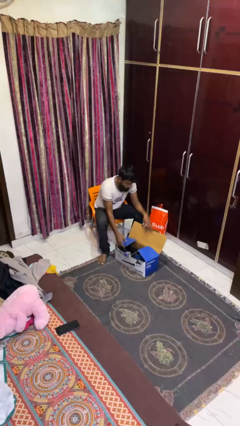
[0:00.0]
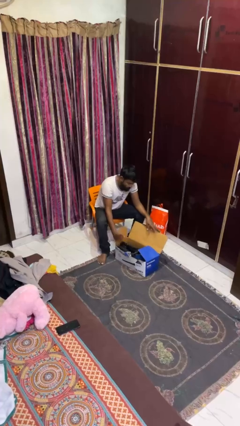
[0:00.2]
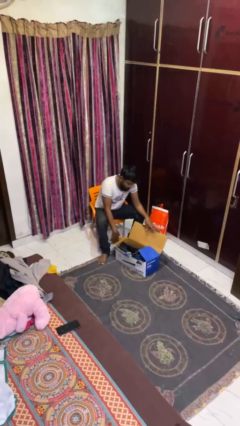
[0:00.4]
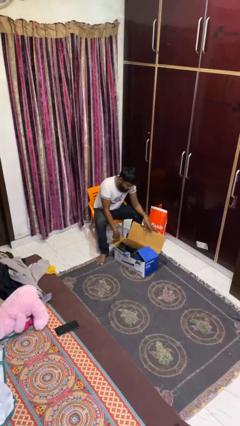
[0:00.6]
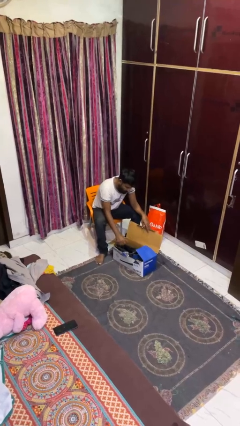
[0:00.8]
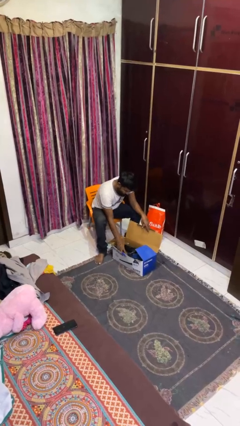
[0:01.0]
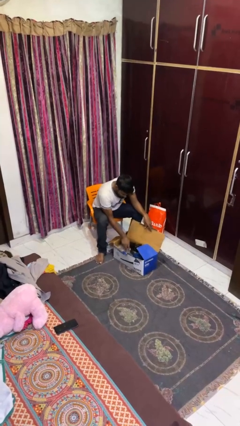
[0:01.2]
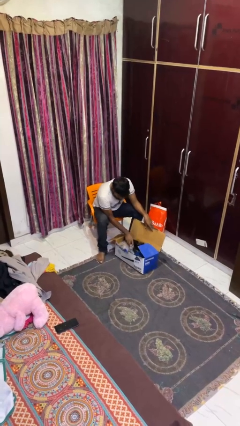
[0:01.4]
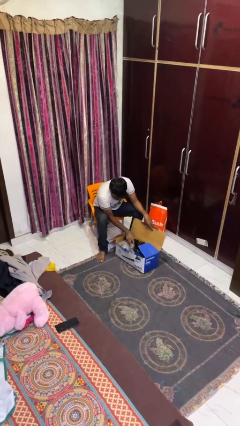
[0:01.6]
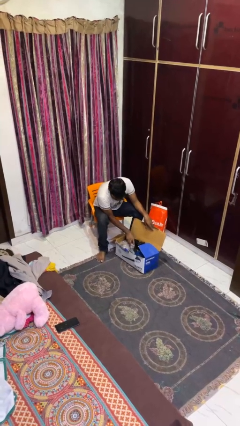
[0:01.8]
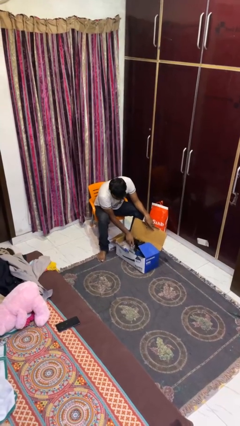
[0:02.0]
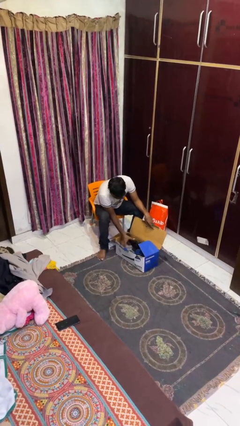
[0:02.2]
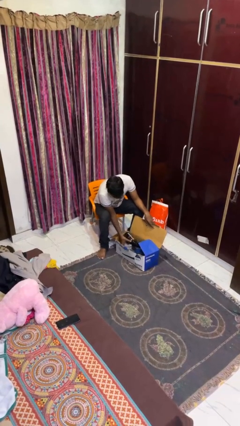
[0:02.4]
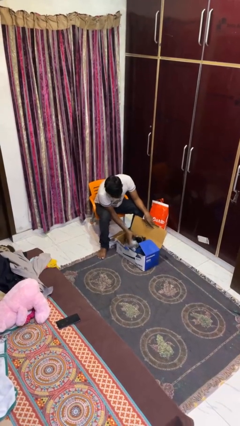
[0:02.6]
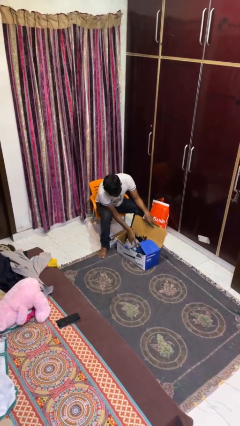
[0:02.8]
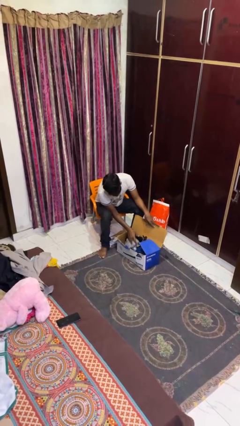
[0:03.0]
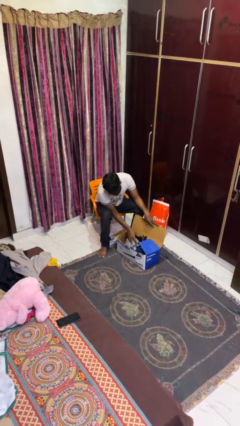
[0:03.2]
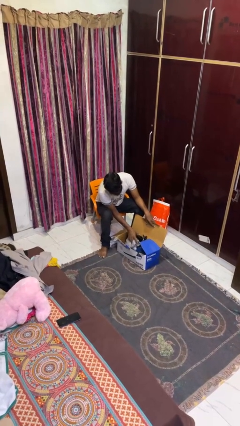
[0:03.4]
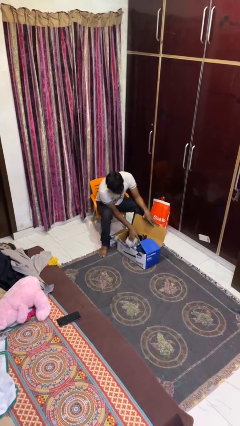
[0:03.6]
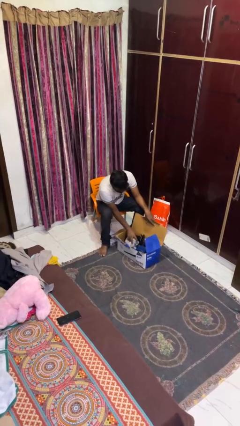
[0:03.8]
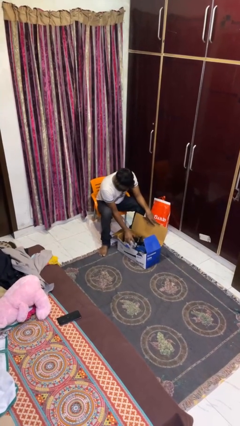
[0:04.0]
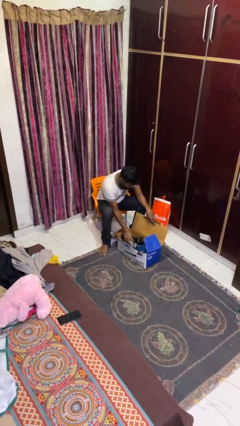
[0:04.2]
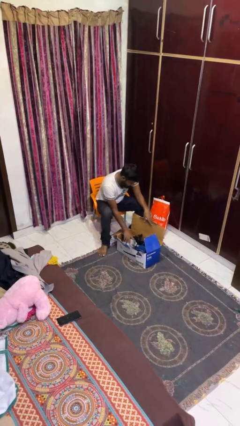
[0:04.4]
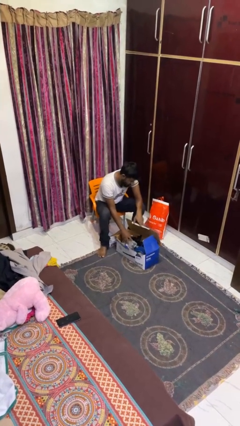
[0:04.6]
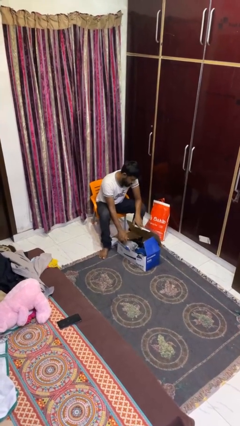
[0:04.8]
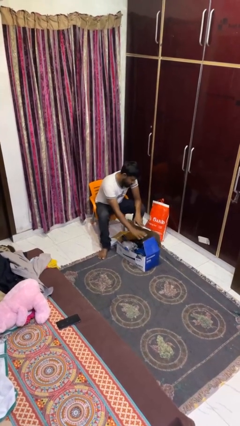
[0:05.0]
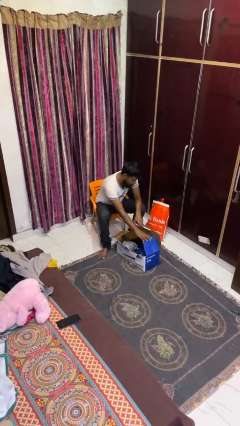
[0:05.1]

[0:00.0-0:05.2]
person searches in box

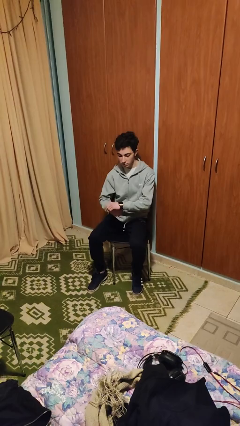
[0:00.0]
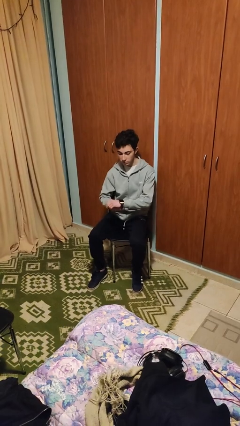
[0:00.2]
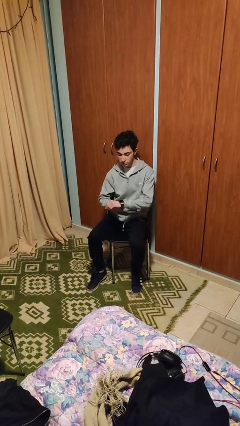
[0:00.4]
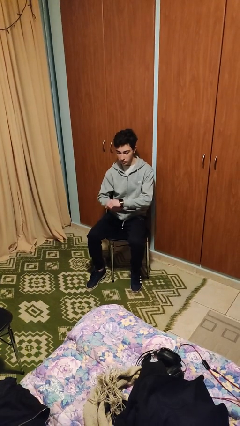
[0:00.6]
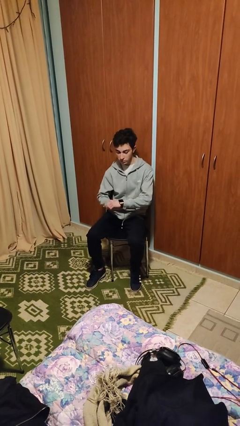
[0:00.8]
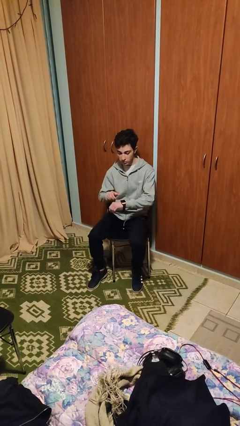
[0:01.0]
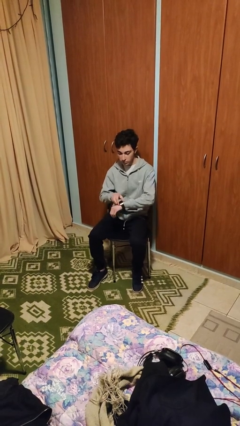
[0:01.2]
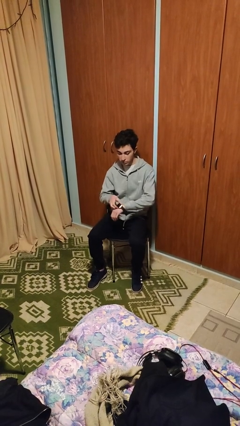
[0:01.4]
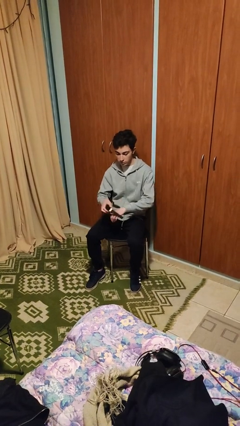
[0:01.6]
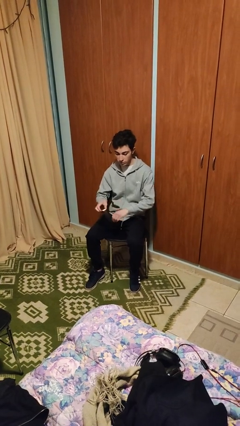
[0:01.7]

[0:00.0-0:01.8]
person takes off wristwatch

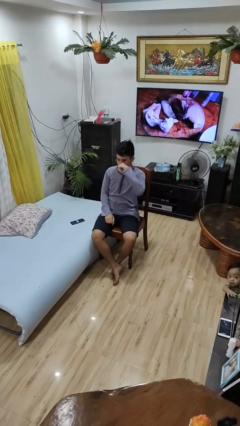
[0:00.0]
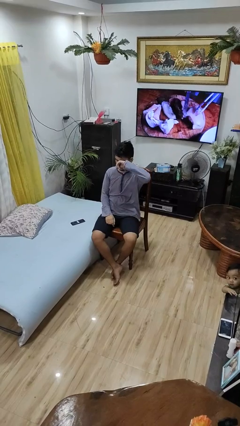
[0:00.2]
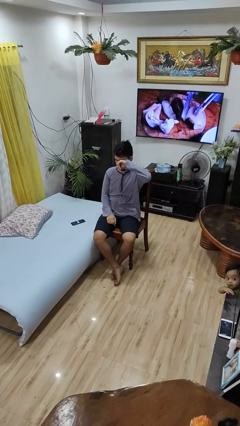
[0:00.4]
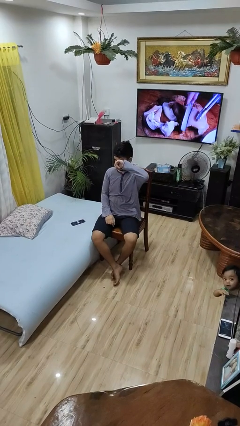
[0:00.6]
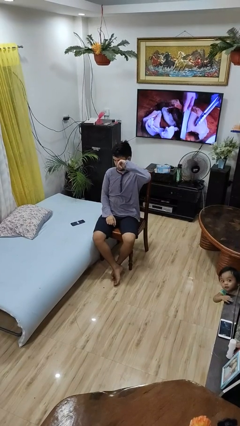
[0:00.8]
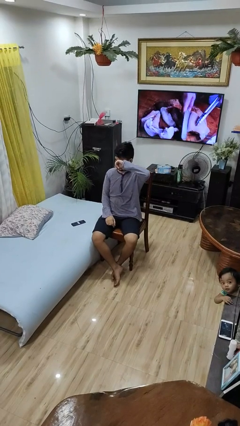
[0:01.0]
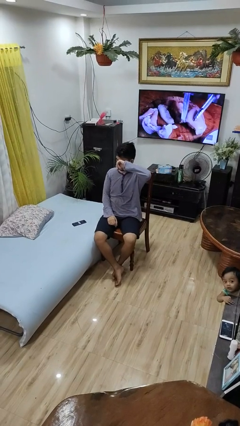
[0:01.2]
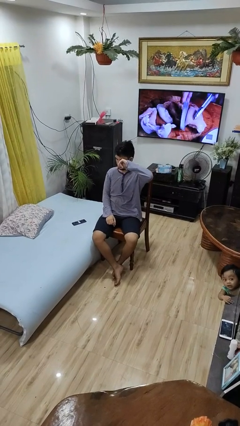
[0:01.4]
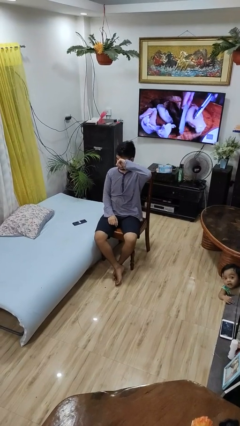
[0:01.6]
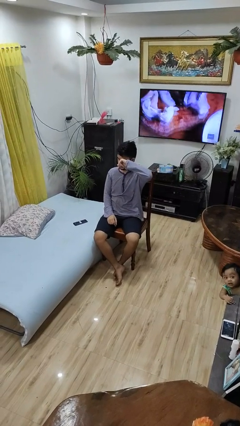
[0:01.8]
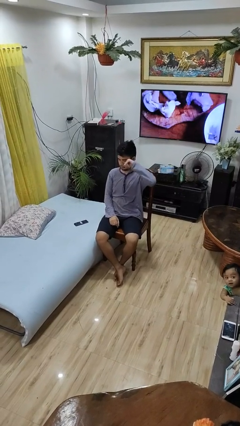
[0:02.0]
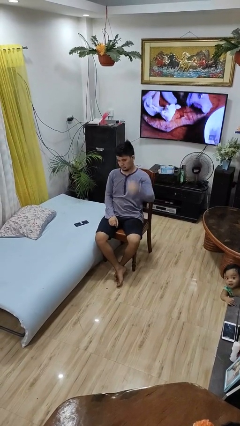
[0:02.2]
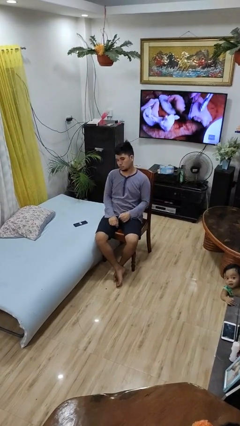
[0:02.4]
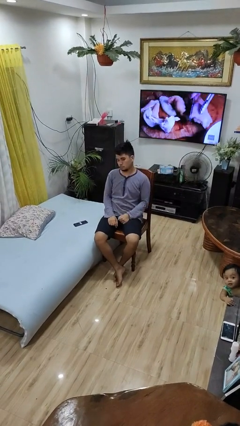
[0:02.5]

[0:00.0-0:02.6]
person rubs eyes

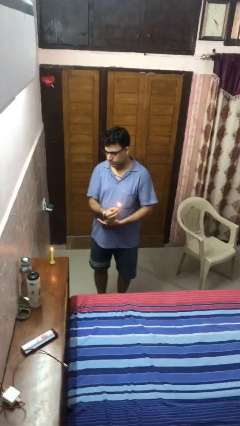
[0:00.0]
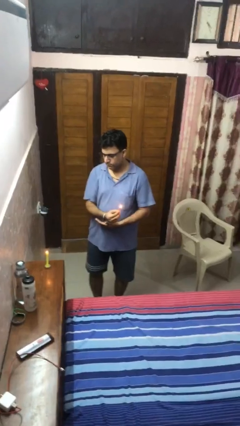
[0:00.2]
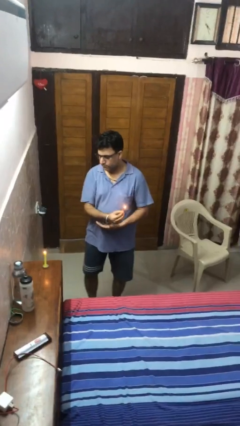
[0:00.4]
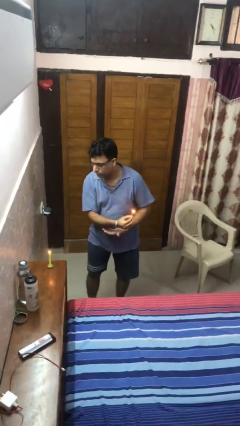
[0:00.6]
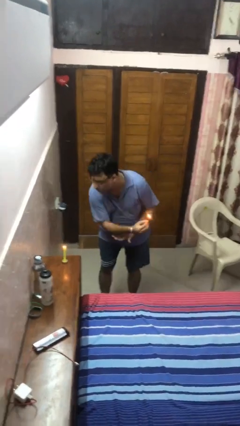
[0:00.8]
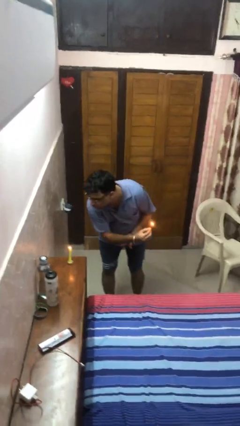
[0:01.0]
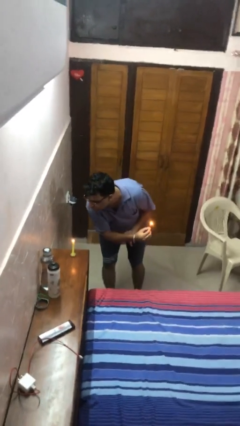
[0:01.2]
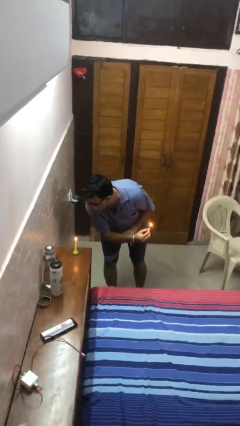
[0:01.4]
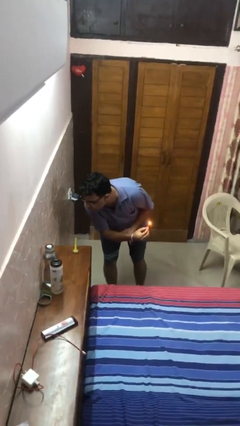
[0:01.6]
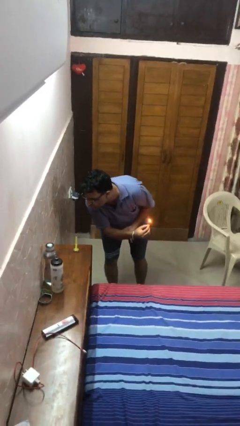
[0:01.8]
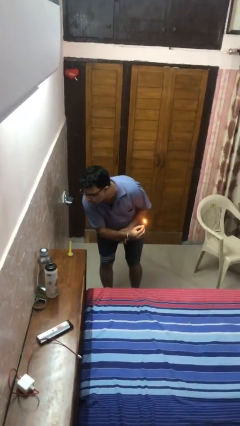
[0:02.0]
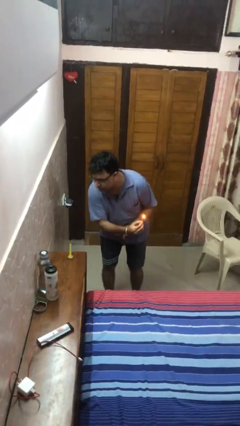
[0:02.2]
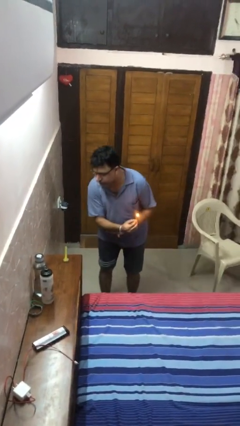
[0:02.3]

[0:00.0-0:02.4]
person extinguishes candle

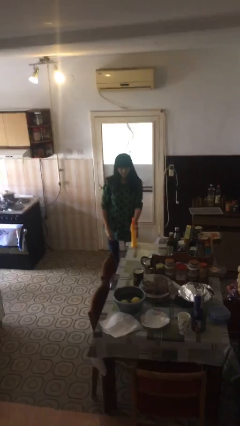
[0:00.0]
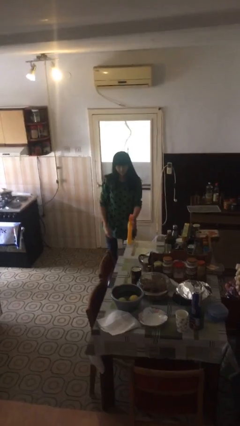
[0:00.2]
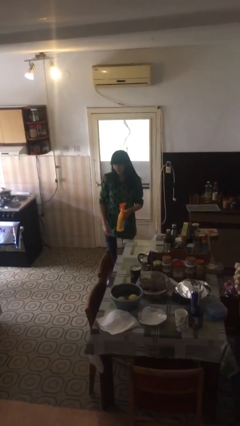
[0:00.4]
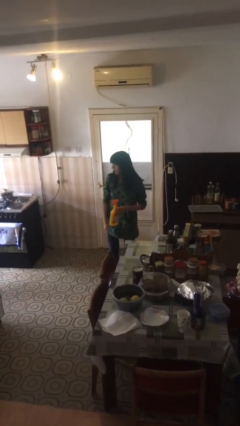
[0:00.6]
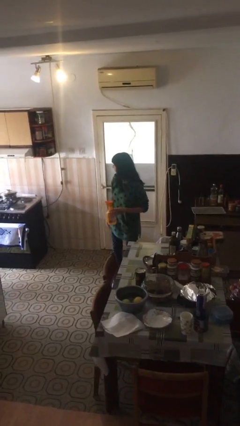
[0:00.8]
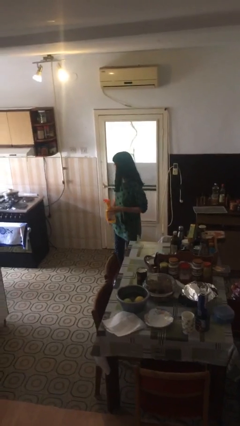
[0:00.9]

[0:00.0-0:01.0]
person picks up object from table

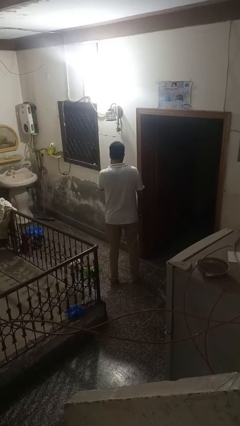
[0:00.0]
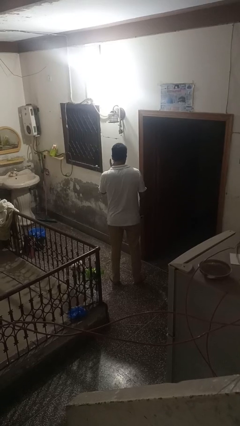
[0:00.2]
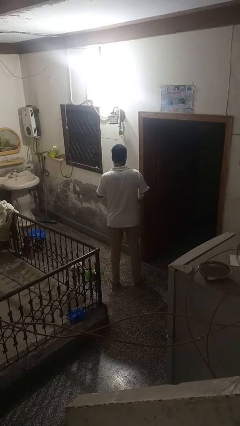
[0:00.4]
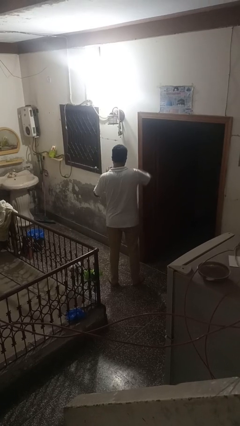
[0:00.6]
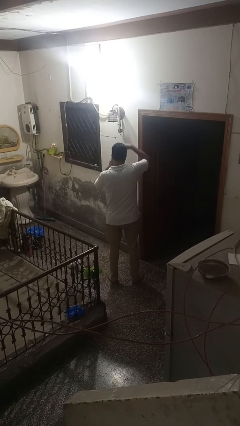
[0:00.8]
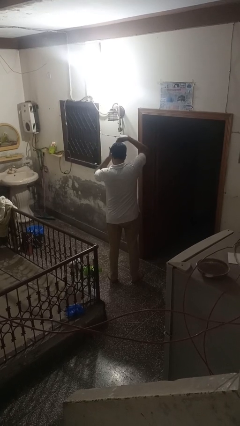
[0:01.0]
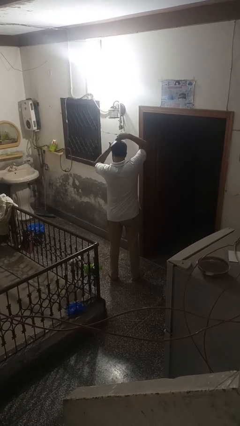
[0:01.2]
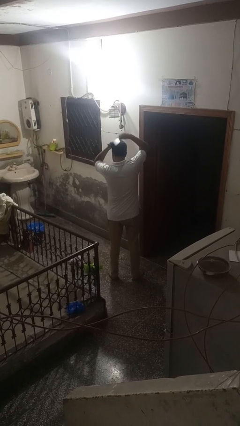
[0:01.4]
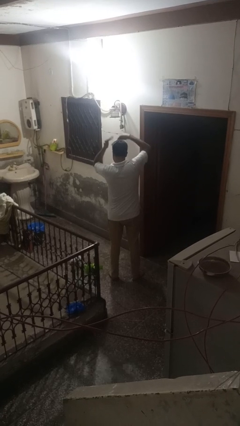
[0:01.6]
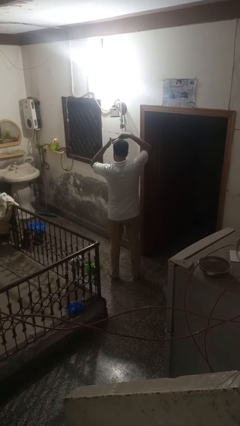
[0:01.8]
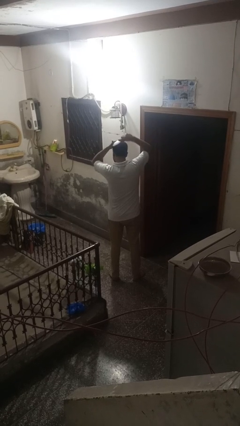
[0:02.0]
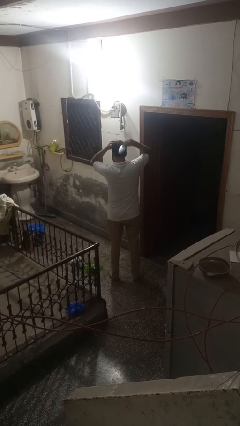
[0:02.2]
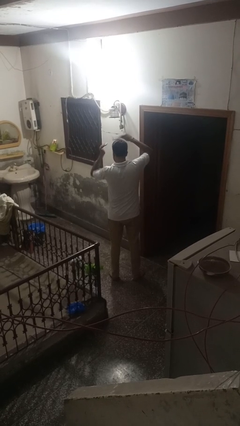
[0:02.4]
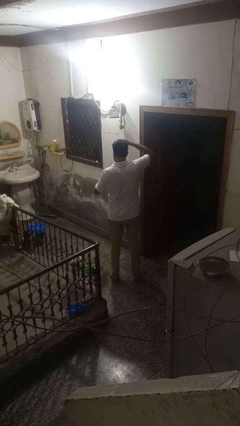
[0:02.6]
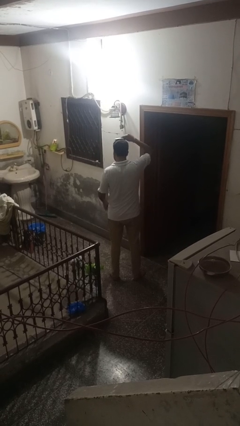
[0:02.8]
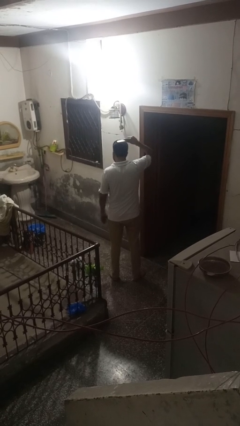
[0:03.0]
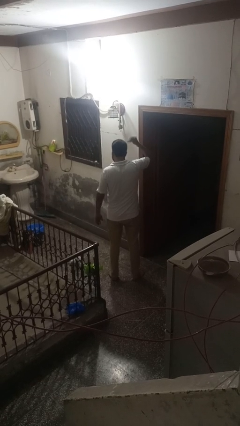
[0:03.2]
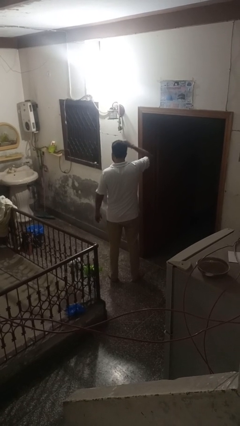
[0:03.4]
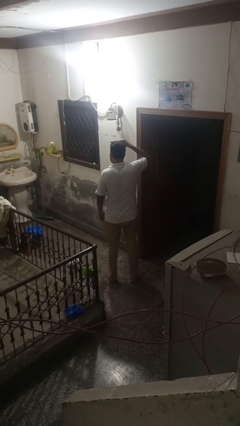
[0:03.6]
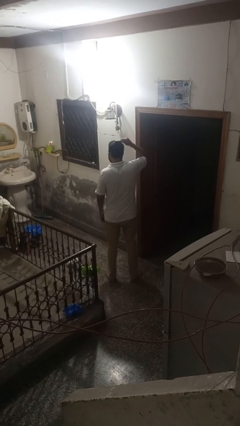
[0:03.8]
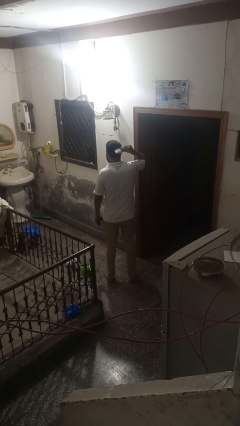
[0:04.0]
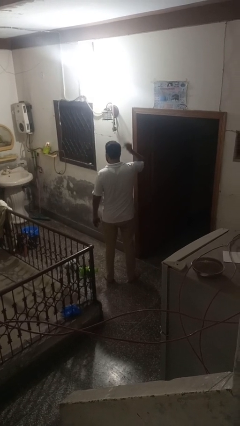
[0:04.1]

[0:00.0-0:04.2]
person brushes hair

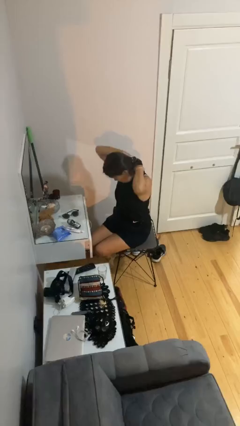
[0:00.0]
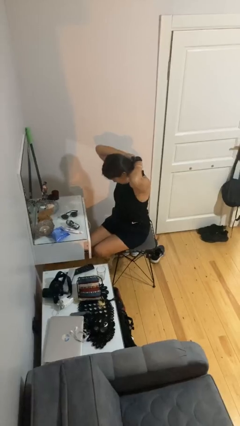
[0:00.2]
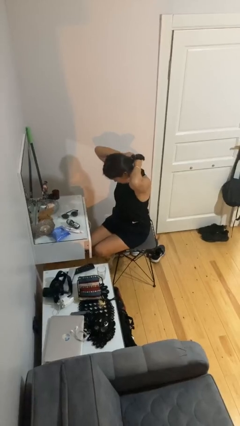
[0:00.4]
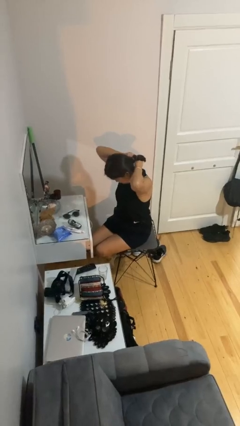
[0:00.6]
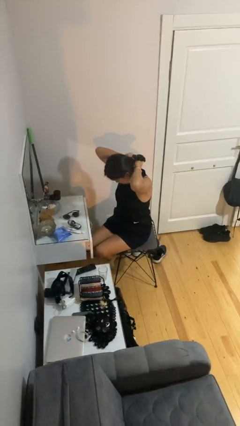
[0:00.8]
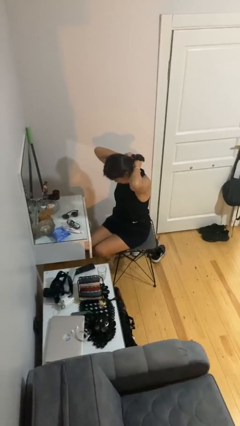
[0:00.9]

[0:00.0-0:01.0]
person puts on necklace
